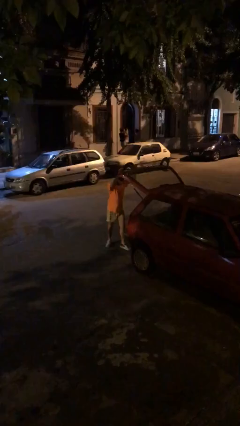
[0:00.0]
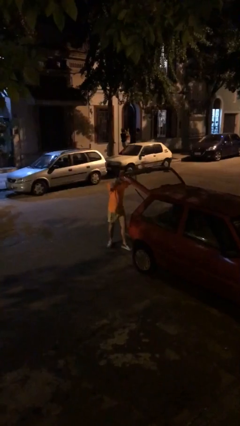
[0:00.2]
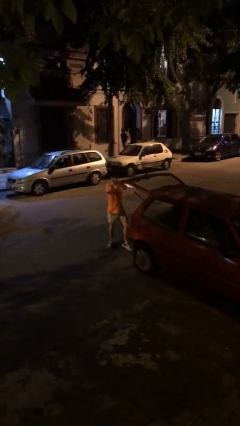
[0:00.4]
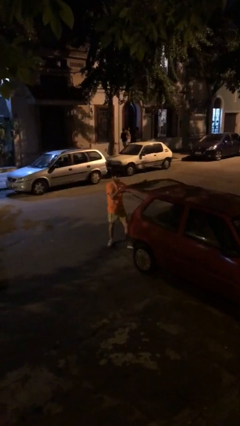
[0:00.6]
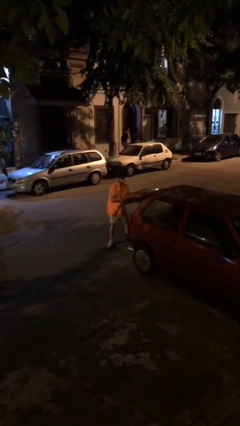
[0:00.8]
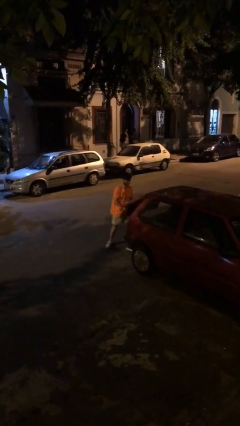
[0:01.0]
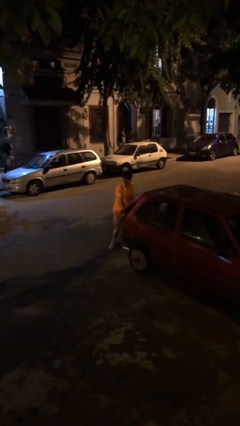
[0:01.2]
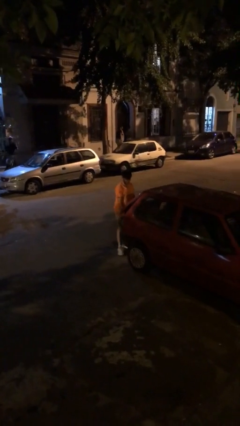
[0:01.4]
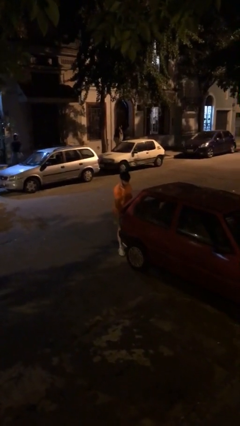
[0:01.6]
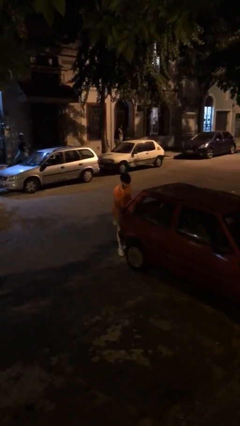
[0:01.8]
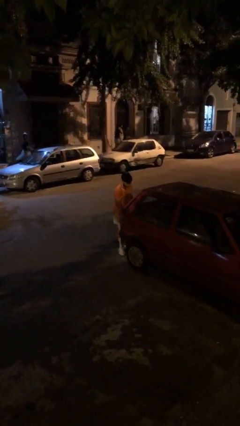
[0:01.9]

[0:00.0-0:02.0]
person closes car trunk

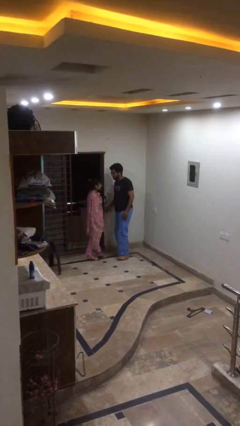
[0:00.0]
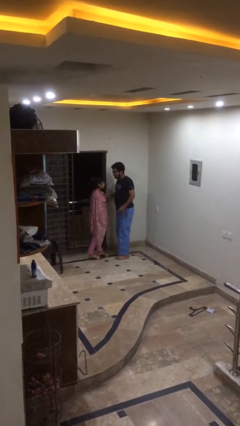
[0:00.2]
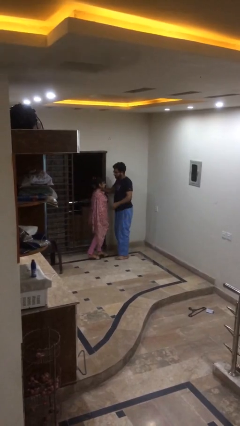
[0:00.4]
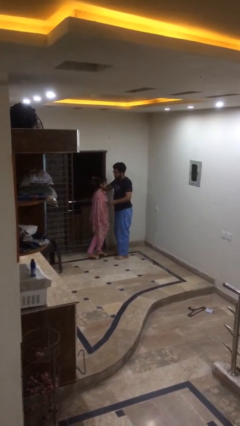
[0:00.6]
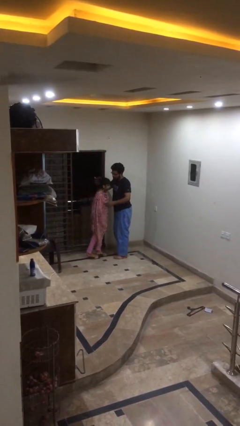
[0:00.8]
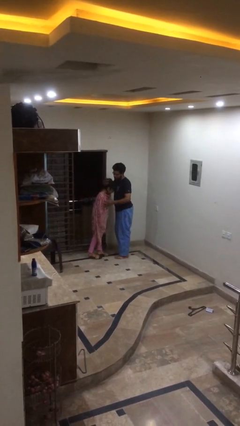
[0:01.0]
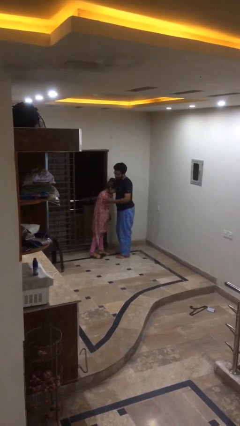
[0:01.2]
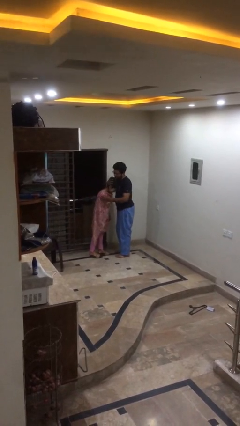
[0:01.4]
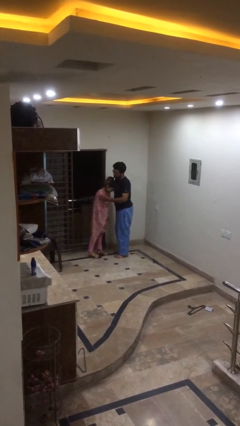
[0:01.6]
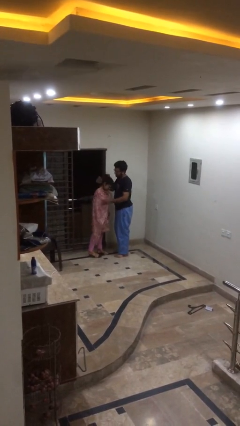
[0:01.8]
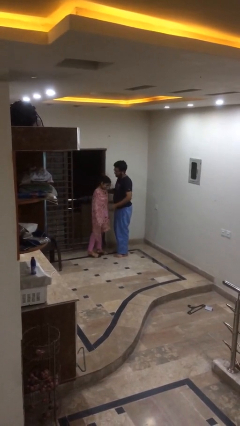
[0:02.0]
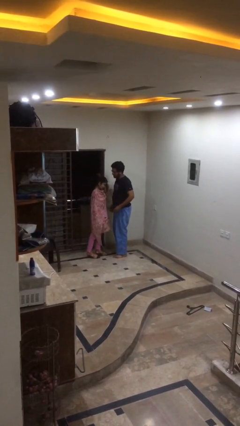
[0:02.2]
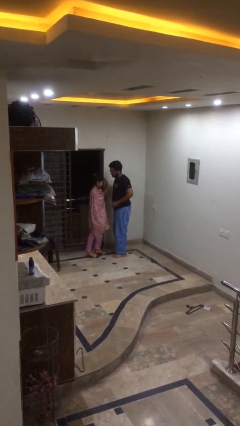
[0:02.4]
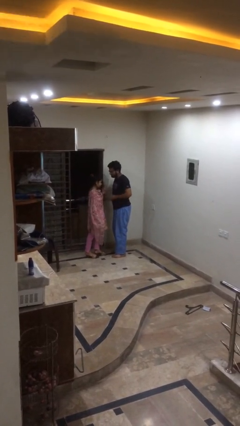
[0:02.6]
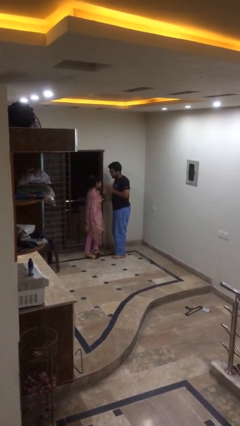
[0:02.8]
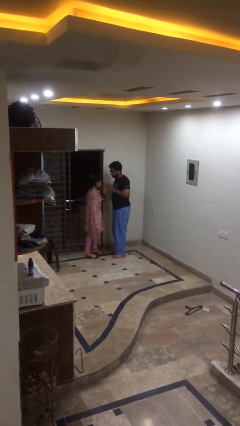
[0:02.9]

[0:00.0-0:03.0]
person embraces person

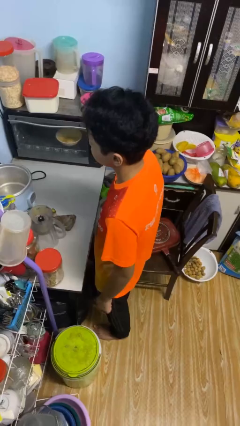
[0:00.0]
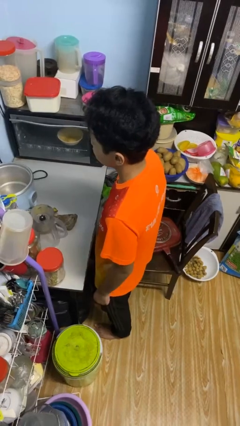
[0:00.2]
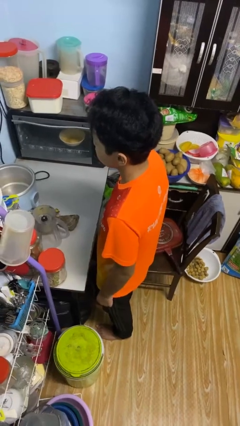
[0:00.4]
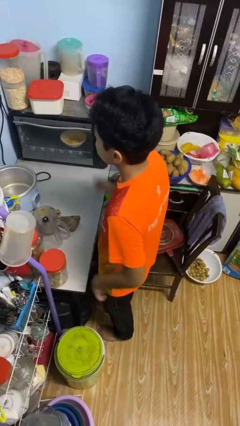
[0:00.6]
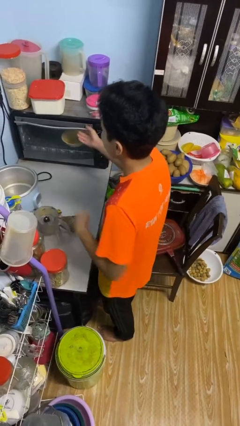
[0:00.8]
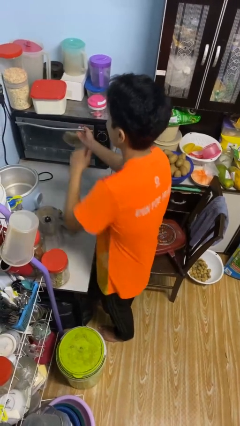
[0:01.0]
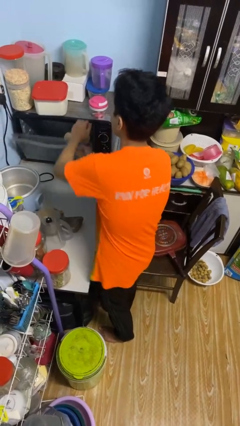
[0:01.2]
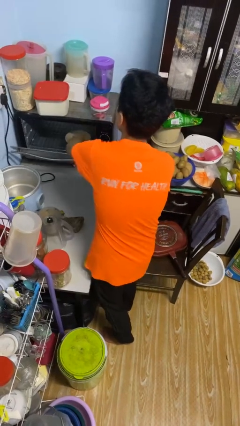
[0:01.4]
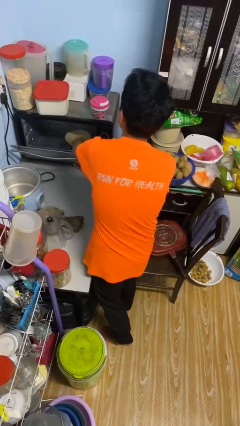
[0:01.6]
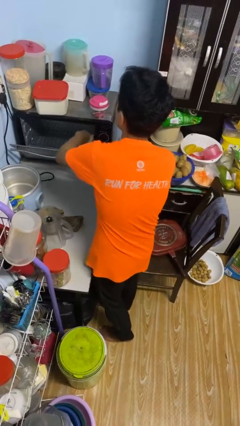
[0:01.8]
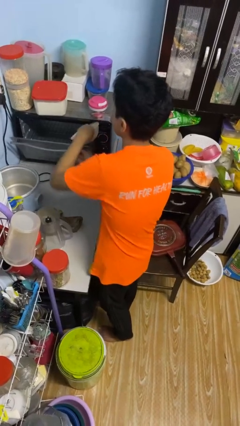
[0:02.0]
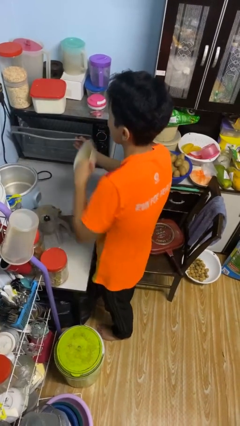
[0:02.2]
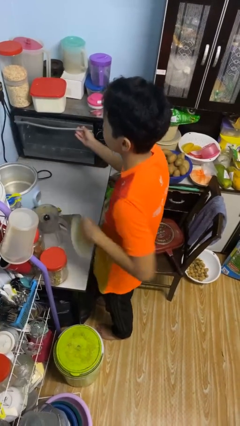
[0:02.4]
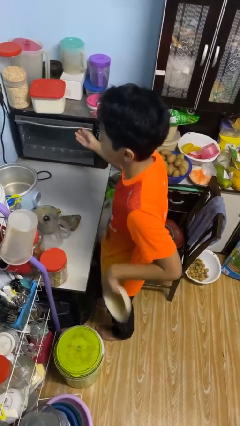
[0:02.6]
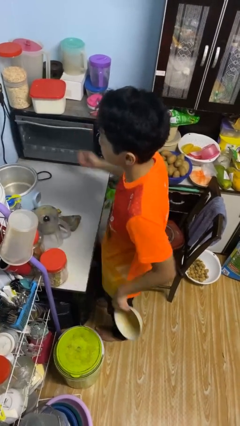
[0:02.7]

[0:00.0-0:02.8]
person takes object from oven

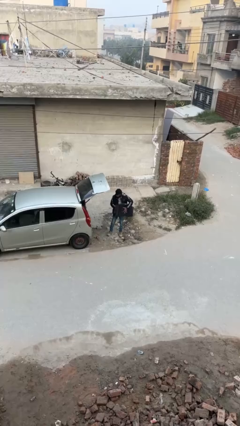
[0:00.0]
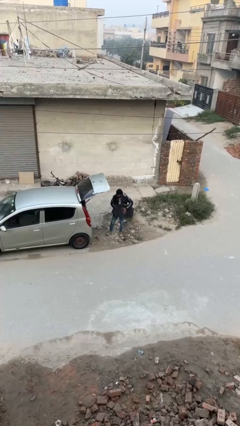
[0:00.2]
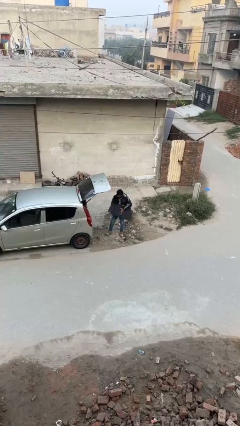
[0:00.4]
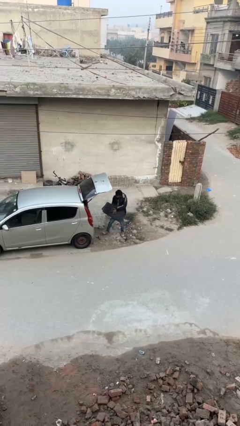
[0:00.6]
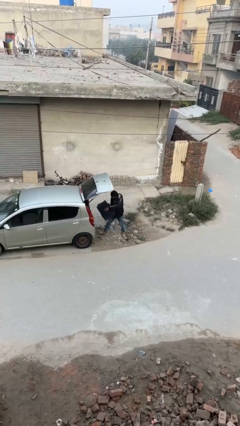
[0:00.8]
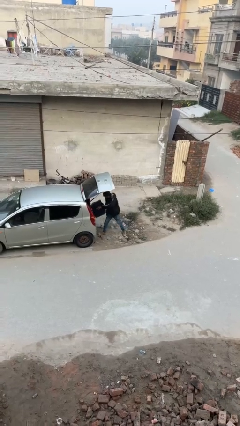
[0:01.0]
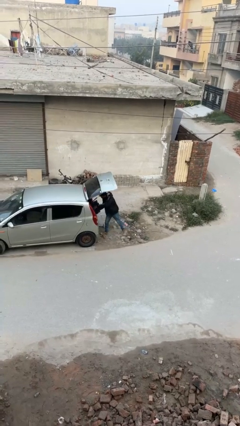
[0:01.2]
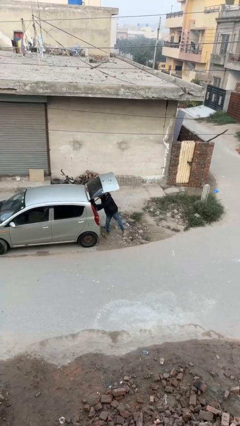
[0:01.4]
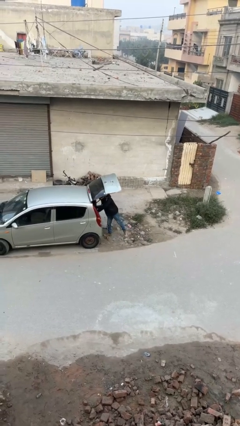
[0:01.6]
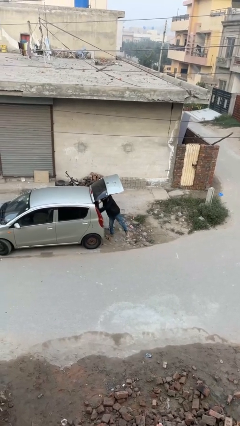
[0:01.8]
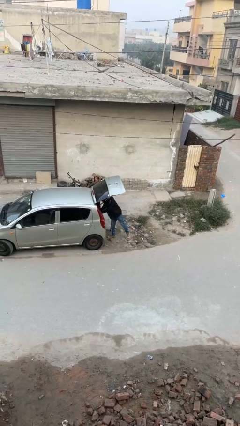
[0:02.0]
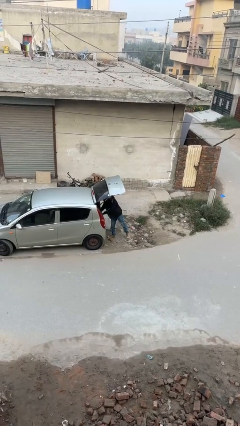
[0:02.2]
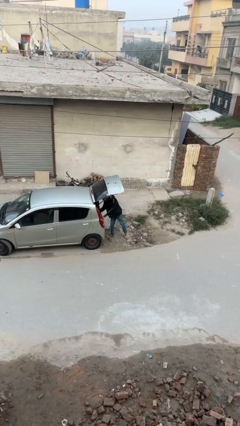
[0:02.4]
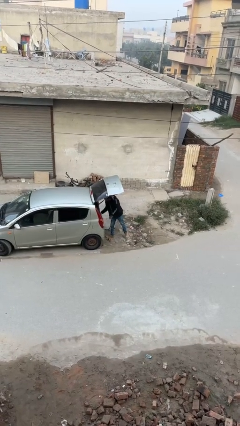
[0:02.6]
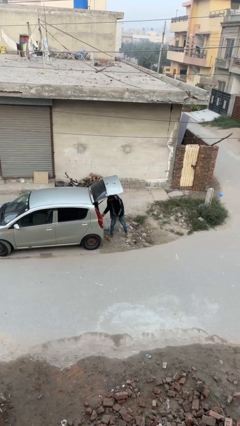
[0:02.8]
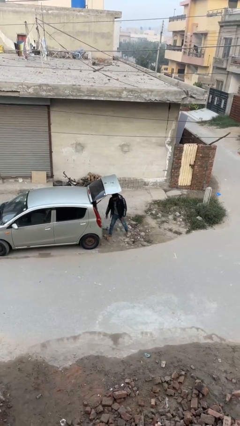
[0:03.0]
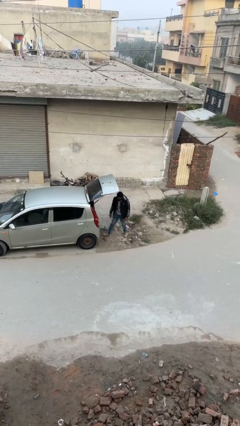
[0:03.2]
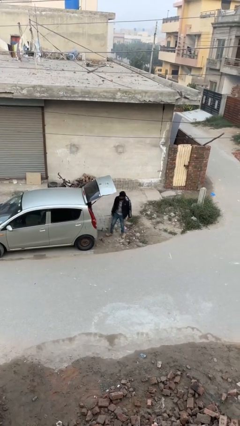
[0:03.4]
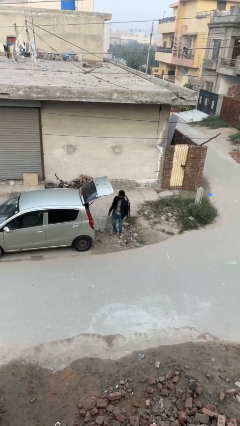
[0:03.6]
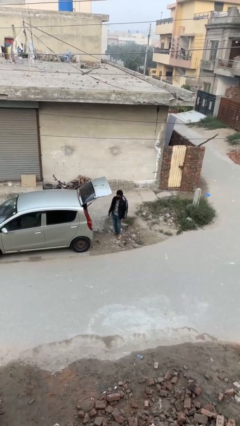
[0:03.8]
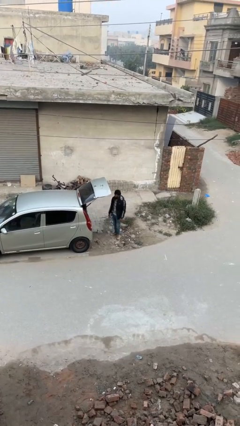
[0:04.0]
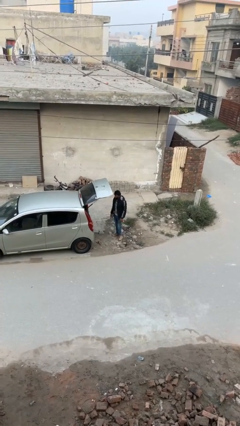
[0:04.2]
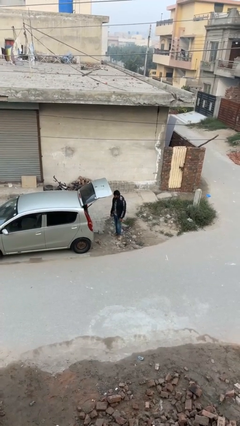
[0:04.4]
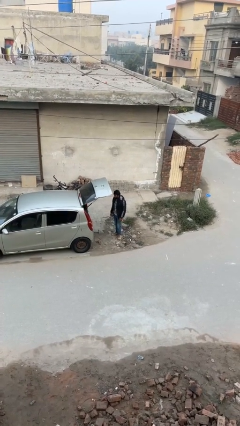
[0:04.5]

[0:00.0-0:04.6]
person loads car

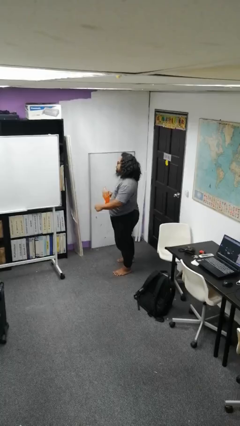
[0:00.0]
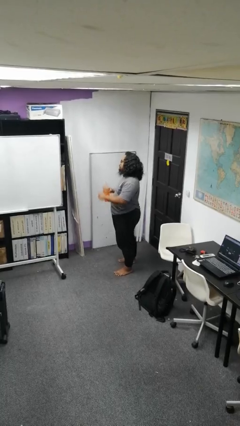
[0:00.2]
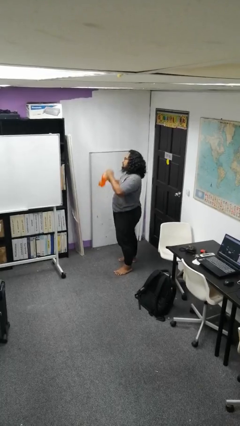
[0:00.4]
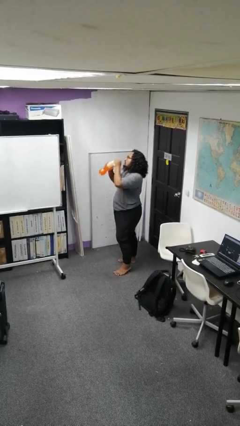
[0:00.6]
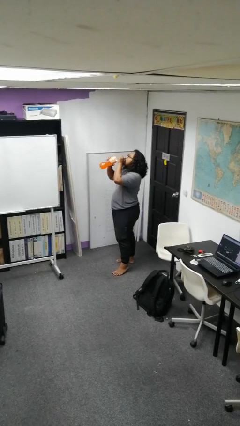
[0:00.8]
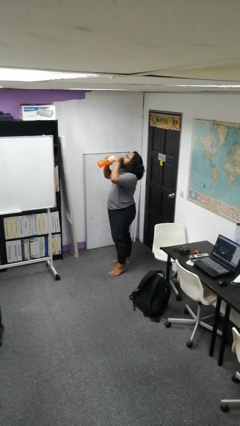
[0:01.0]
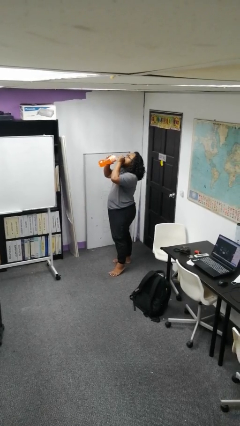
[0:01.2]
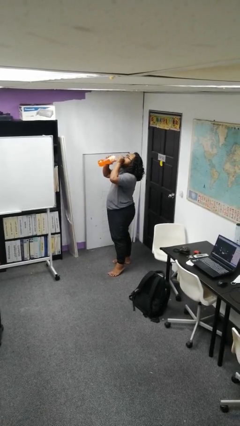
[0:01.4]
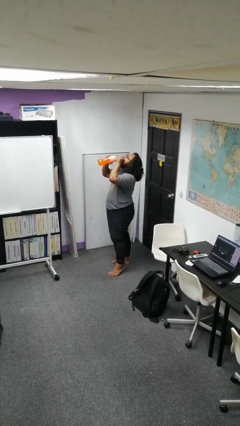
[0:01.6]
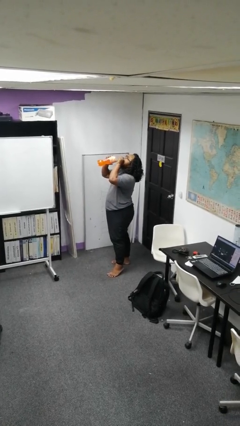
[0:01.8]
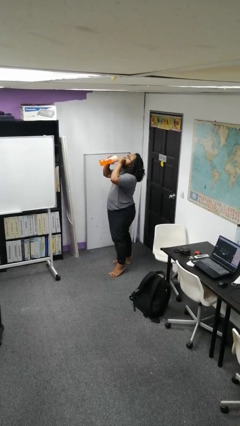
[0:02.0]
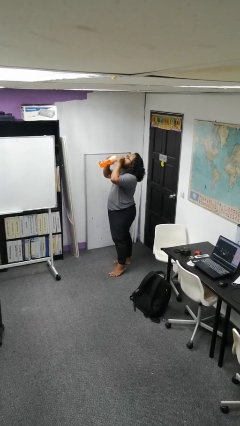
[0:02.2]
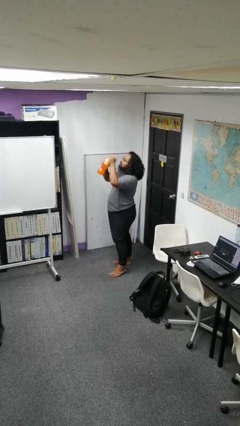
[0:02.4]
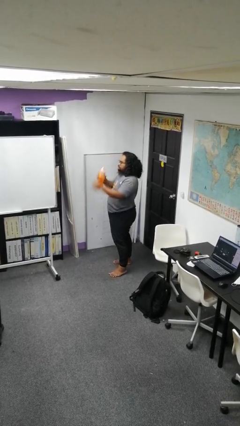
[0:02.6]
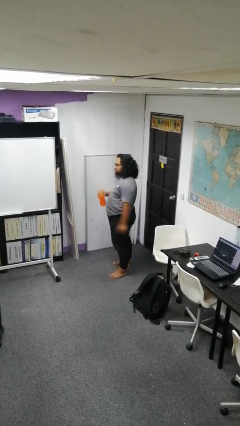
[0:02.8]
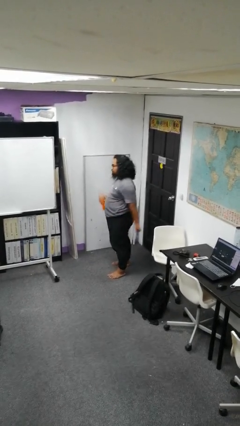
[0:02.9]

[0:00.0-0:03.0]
person drinks from bottle

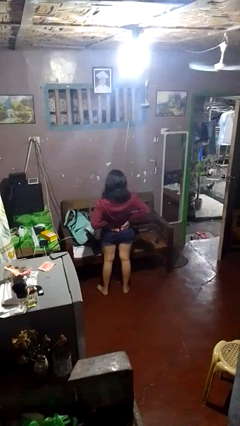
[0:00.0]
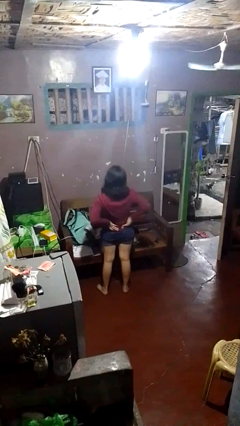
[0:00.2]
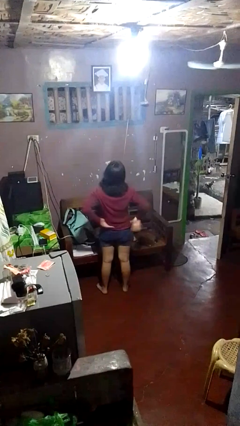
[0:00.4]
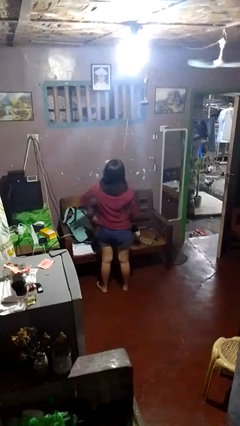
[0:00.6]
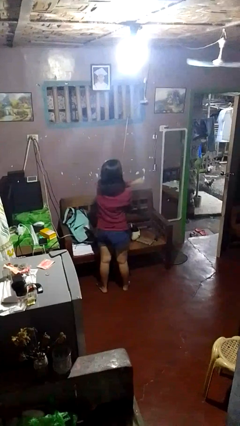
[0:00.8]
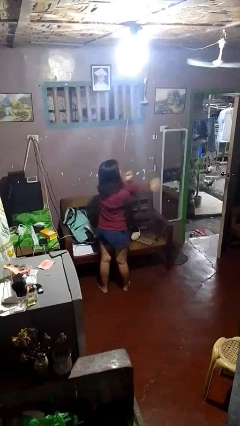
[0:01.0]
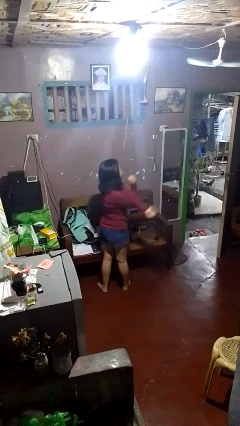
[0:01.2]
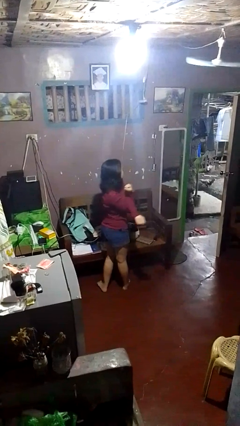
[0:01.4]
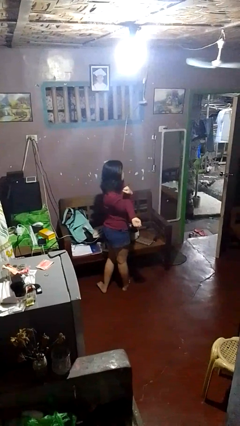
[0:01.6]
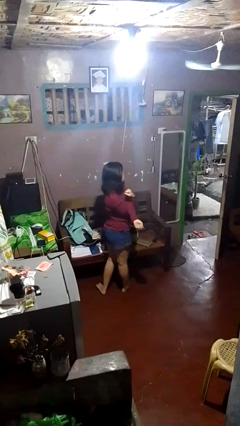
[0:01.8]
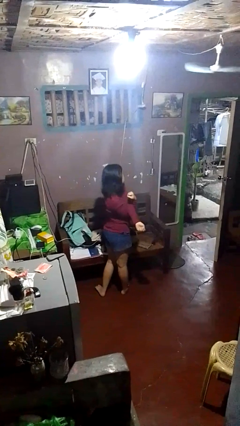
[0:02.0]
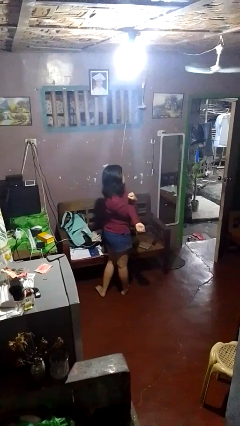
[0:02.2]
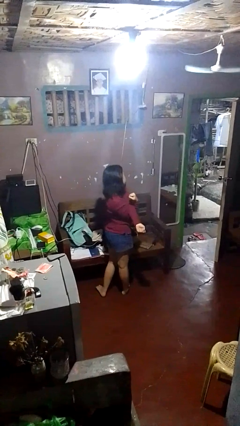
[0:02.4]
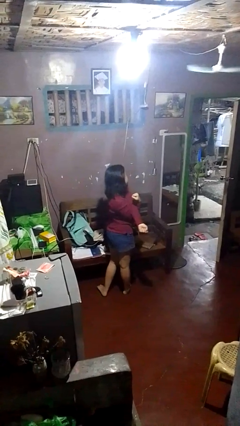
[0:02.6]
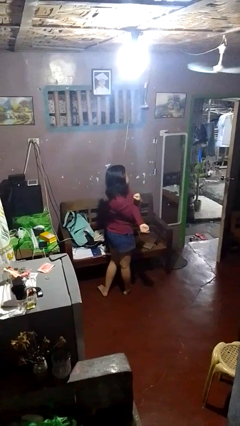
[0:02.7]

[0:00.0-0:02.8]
person stretches arms to side
